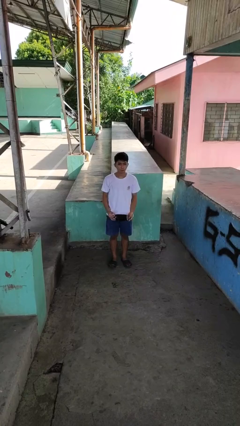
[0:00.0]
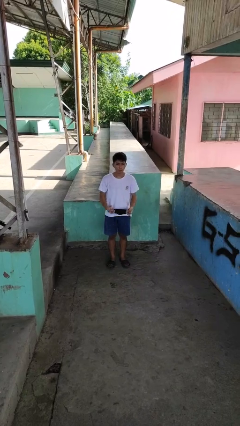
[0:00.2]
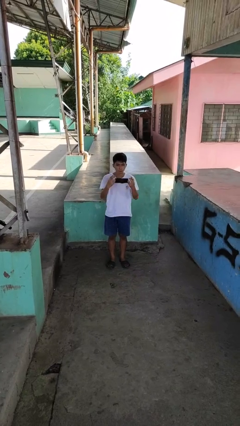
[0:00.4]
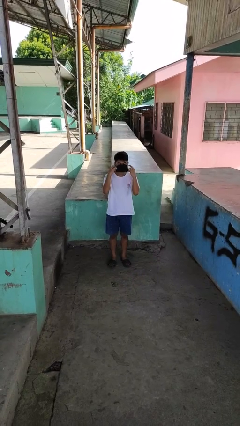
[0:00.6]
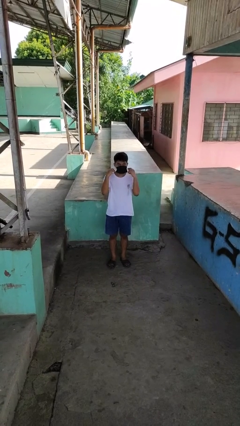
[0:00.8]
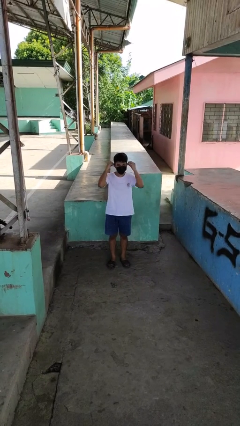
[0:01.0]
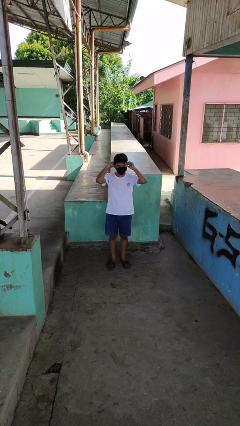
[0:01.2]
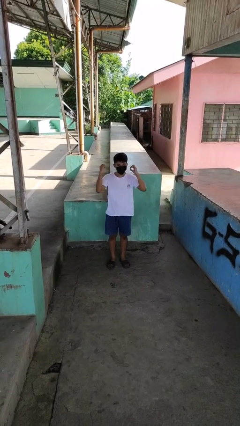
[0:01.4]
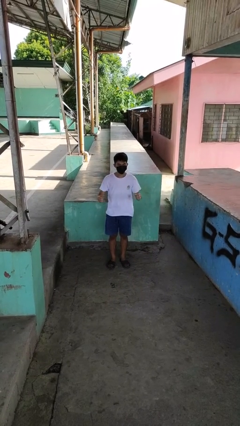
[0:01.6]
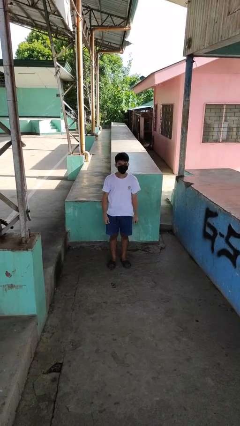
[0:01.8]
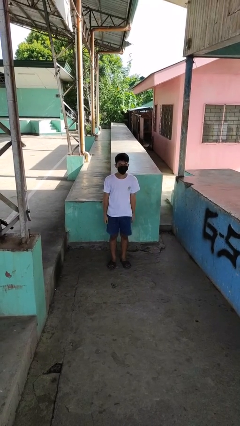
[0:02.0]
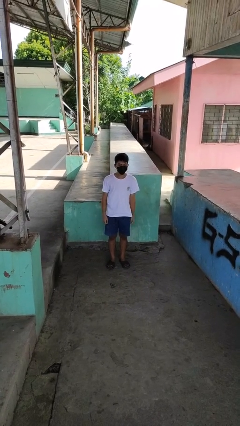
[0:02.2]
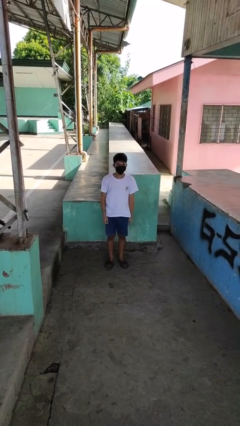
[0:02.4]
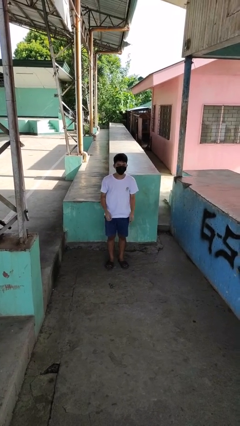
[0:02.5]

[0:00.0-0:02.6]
person puts on facemask

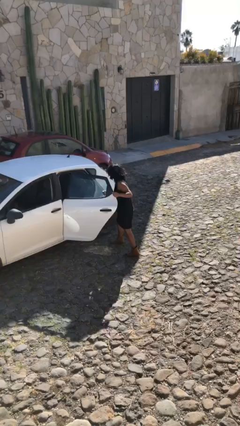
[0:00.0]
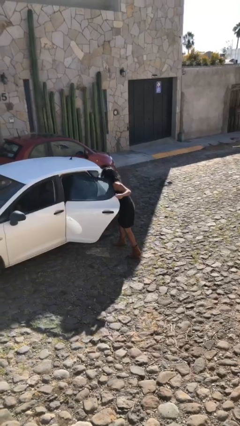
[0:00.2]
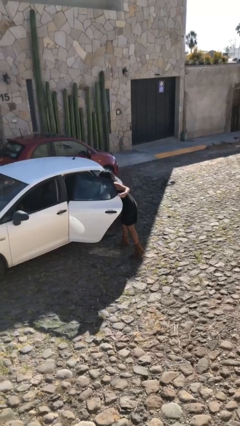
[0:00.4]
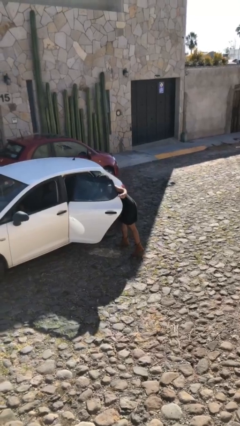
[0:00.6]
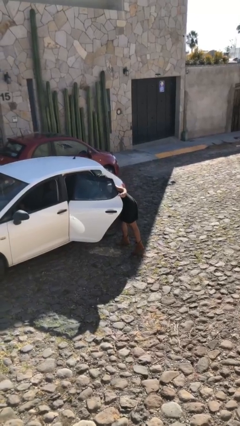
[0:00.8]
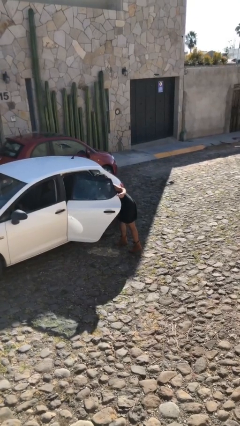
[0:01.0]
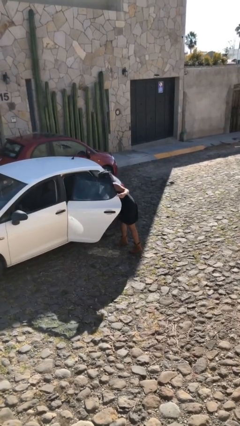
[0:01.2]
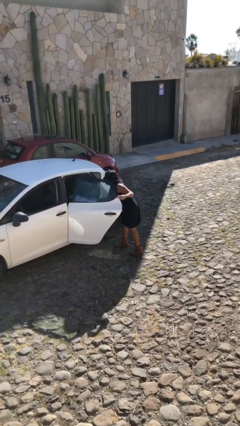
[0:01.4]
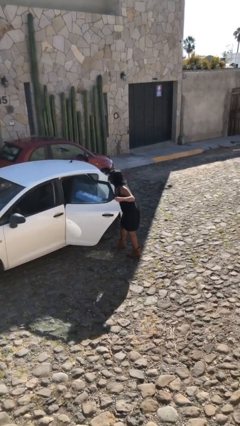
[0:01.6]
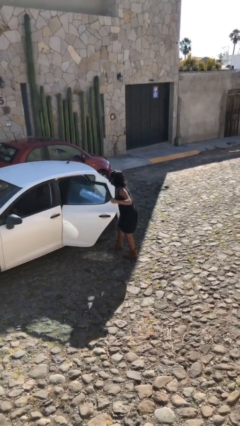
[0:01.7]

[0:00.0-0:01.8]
person unloads car

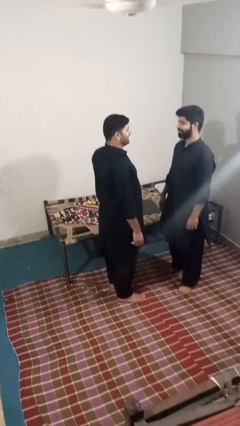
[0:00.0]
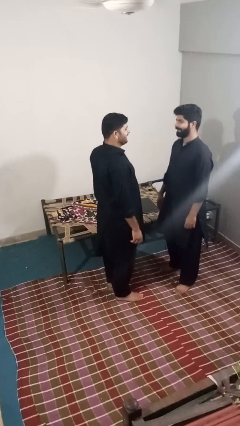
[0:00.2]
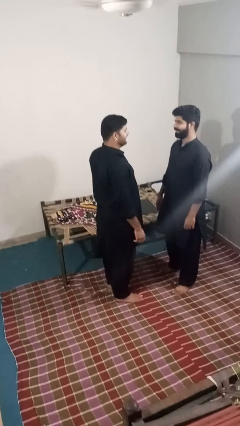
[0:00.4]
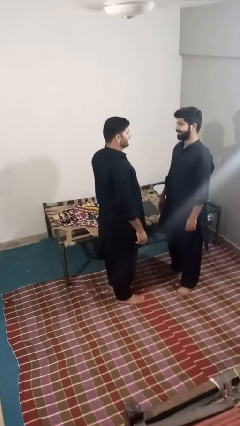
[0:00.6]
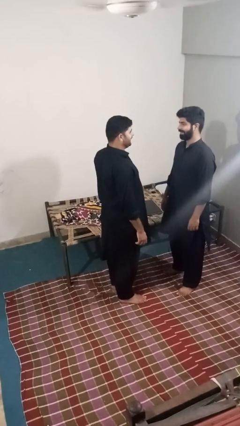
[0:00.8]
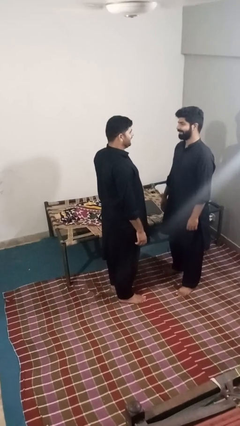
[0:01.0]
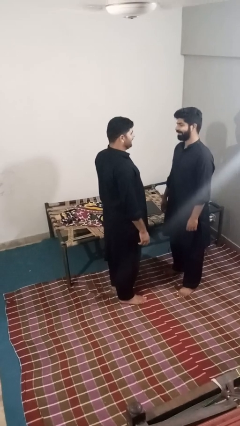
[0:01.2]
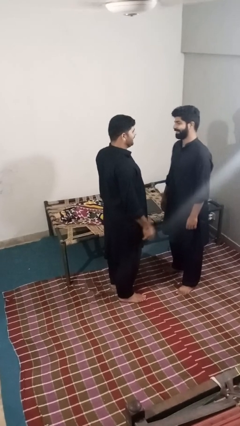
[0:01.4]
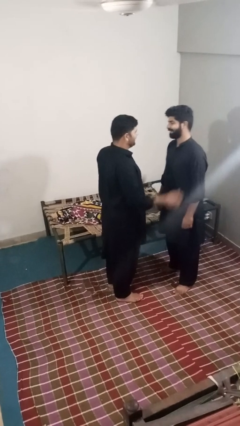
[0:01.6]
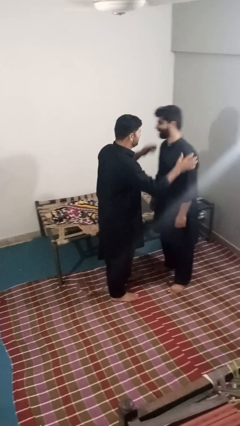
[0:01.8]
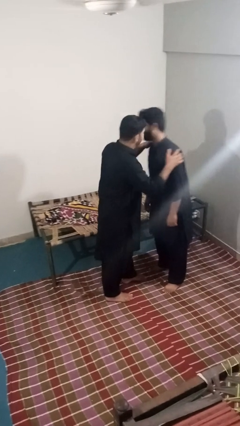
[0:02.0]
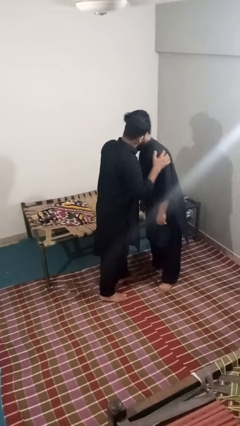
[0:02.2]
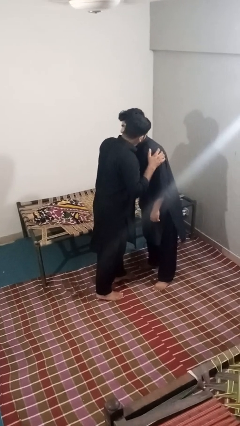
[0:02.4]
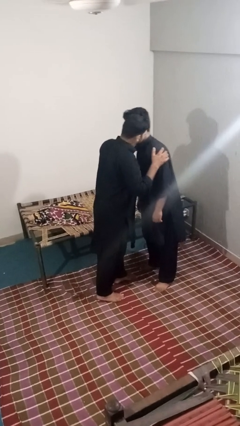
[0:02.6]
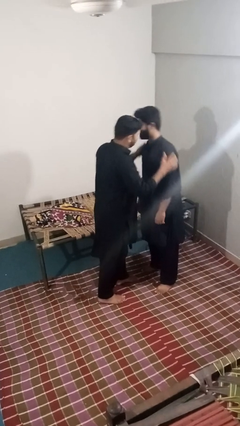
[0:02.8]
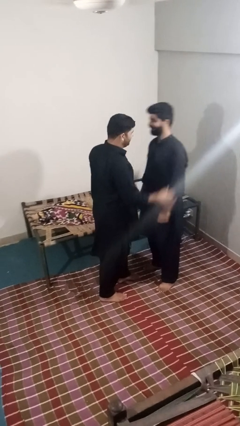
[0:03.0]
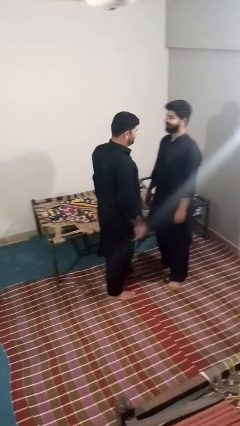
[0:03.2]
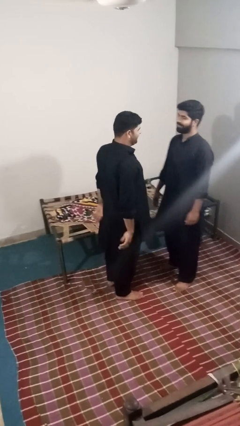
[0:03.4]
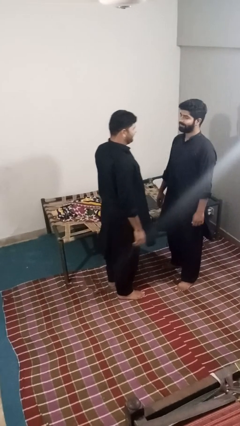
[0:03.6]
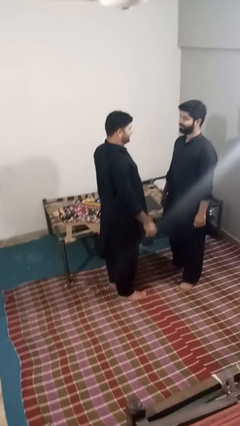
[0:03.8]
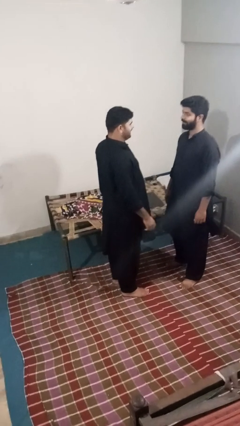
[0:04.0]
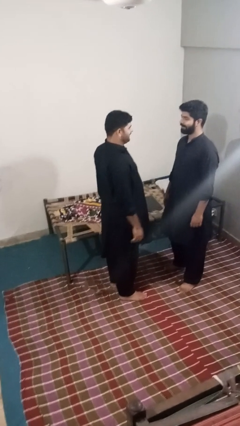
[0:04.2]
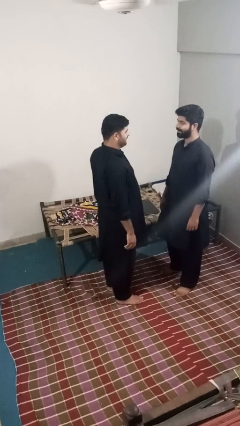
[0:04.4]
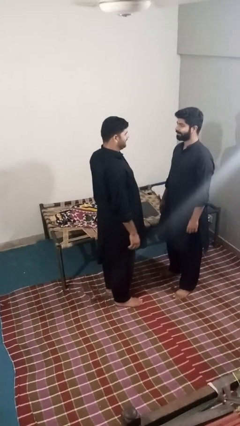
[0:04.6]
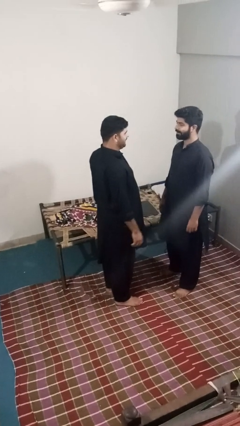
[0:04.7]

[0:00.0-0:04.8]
person kisses cheek of person

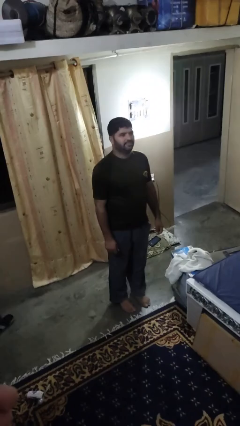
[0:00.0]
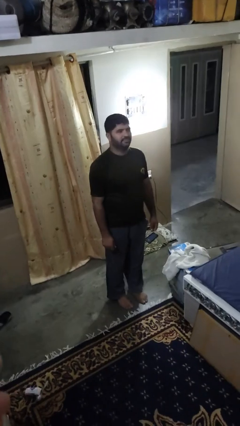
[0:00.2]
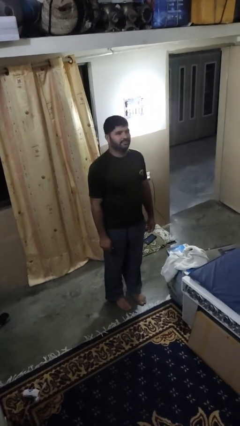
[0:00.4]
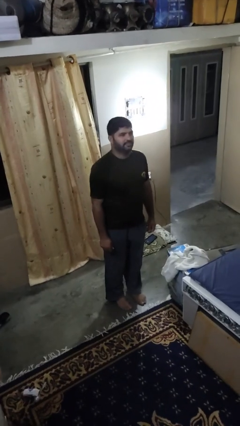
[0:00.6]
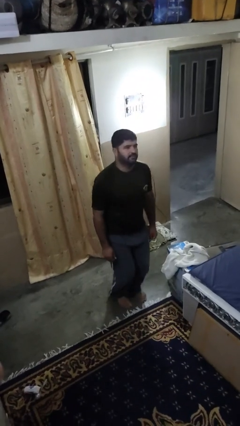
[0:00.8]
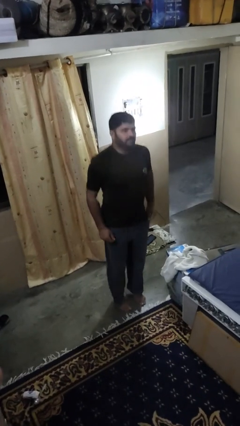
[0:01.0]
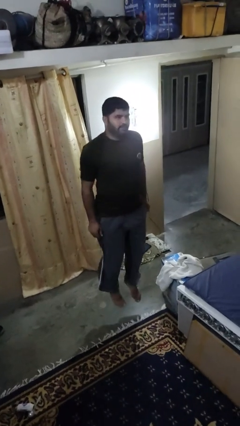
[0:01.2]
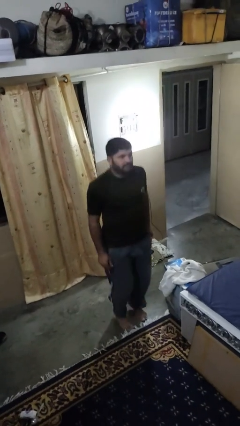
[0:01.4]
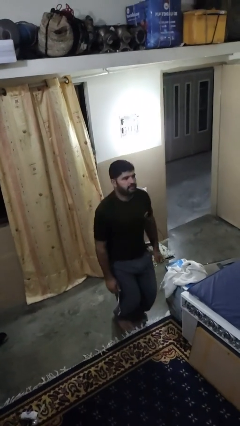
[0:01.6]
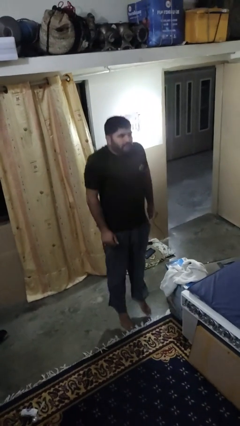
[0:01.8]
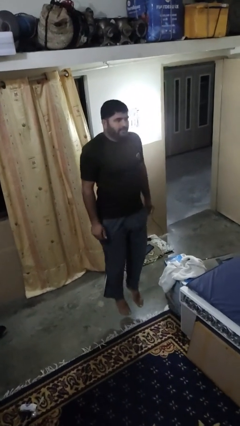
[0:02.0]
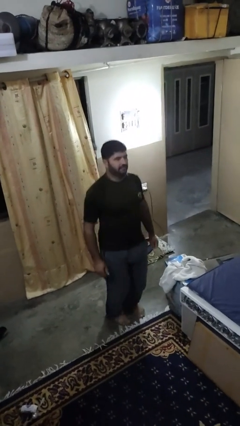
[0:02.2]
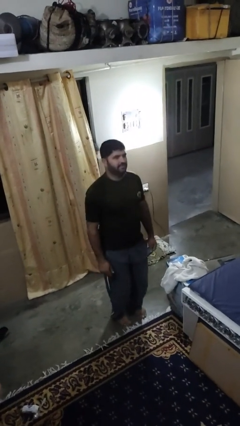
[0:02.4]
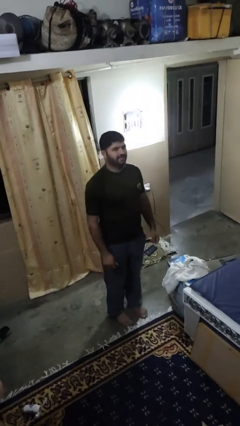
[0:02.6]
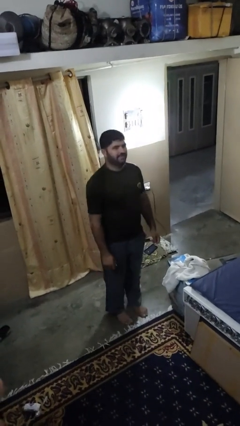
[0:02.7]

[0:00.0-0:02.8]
person jumps

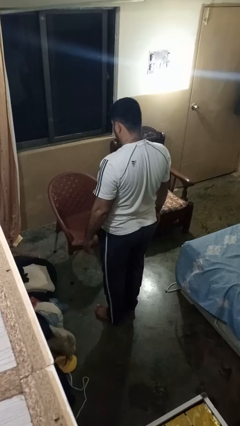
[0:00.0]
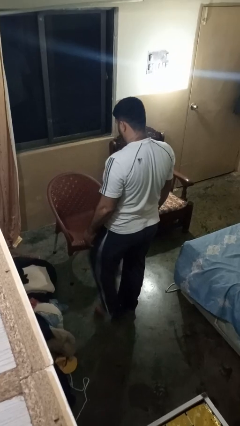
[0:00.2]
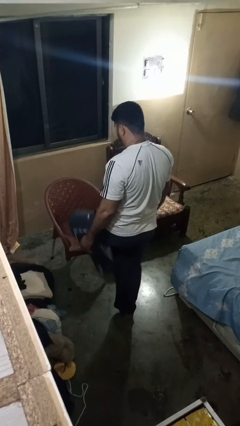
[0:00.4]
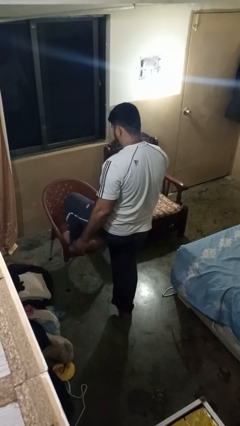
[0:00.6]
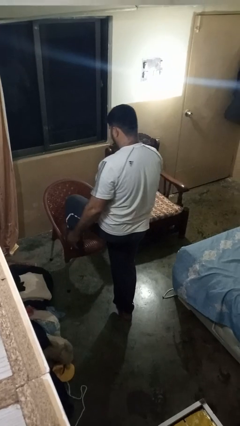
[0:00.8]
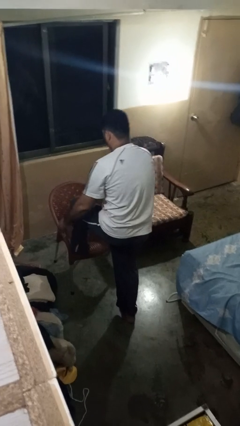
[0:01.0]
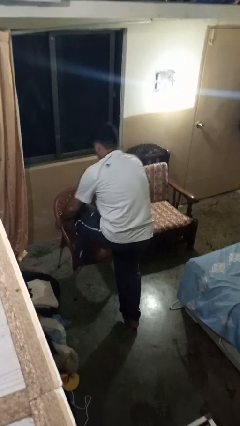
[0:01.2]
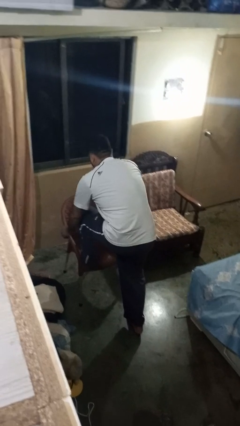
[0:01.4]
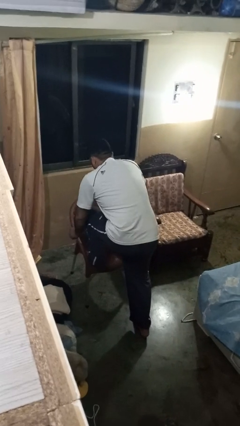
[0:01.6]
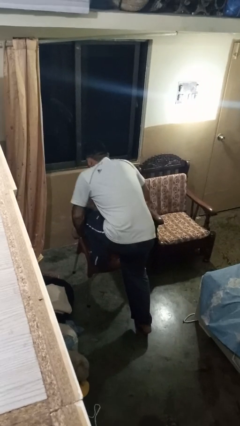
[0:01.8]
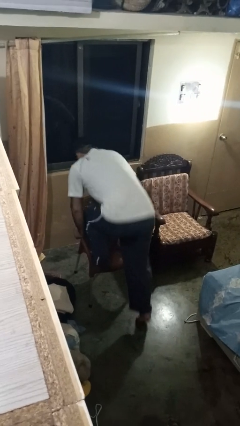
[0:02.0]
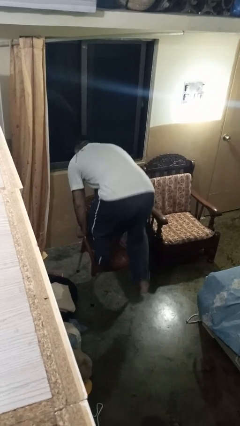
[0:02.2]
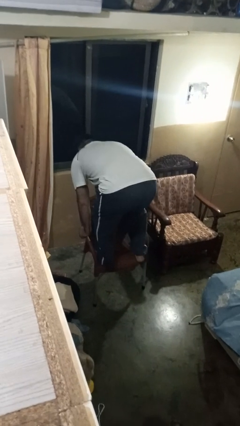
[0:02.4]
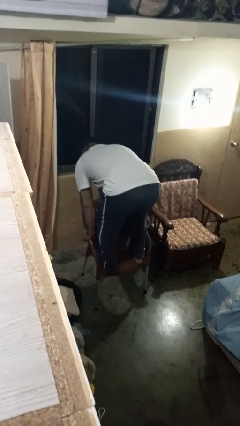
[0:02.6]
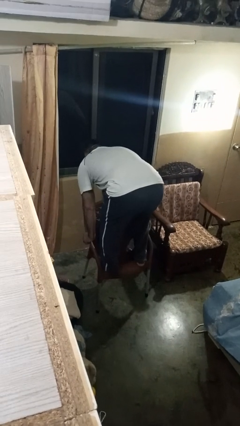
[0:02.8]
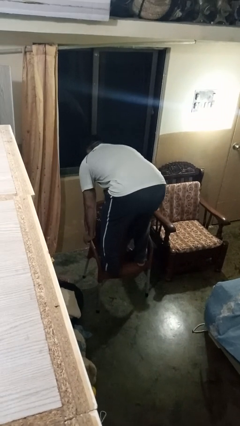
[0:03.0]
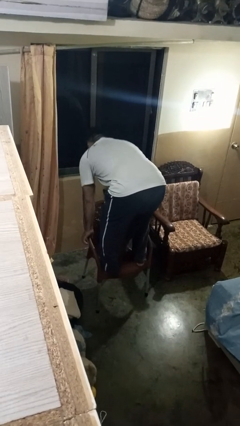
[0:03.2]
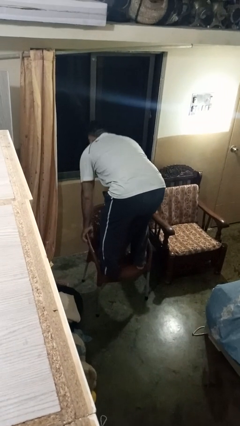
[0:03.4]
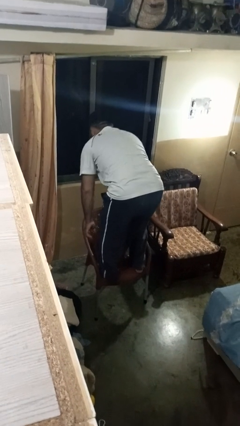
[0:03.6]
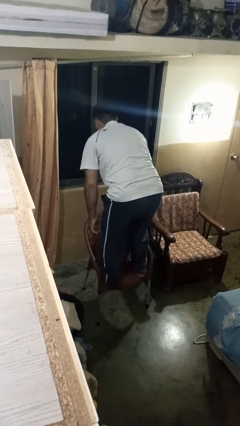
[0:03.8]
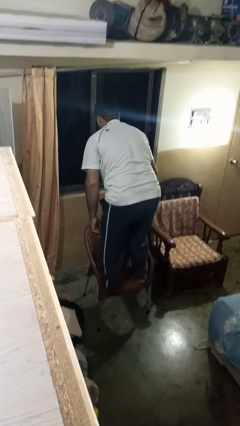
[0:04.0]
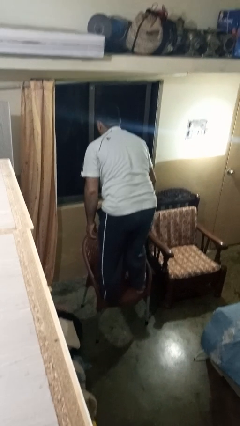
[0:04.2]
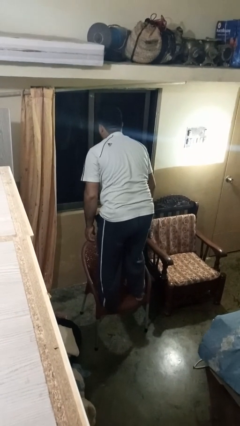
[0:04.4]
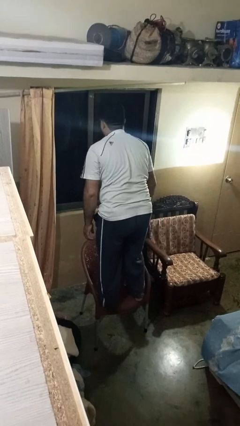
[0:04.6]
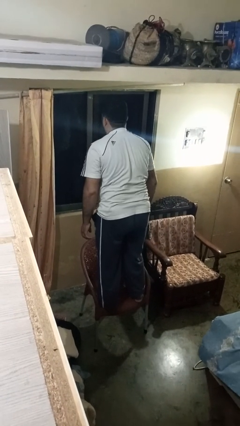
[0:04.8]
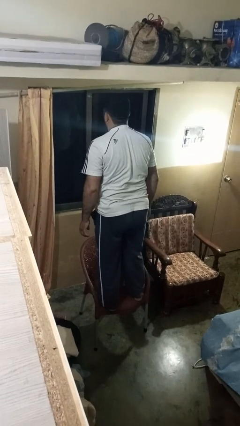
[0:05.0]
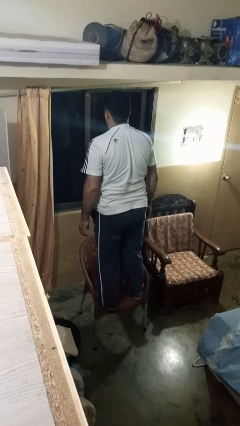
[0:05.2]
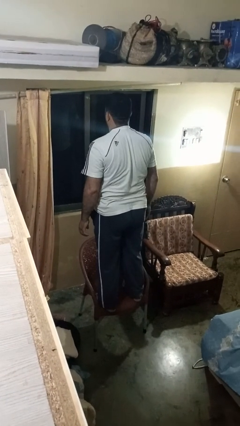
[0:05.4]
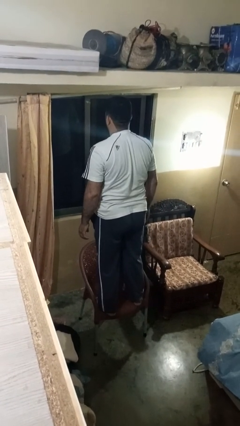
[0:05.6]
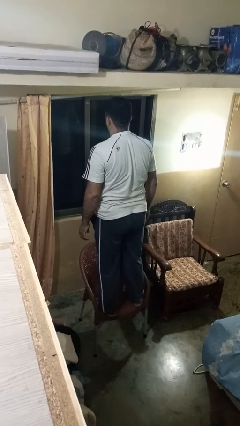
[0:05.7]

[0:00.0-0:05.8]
person climbs on chair
